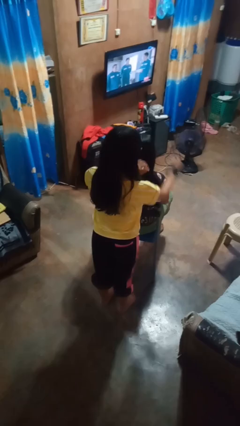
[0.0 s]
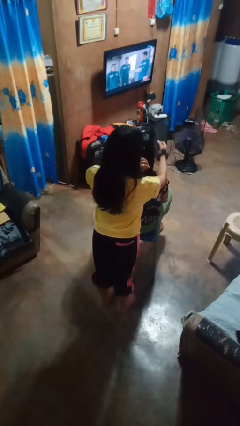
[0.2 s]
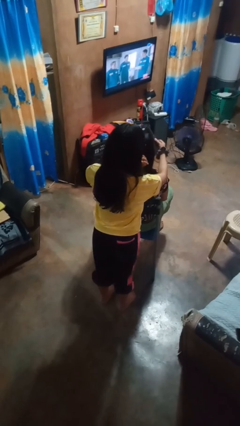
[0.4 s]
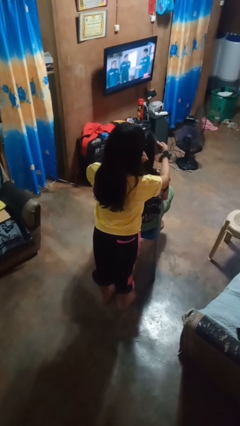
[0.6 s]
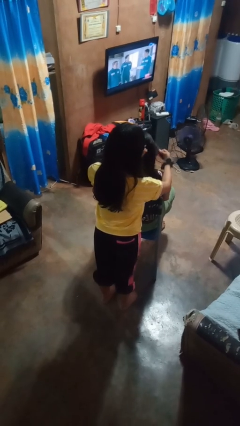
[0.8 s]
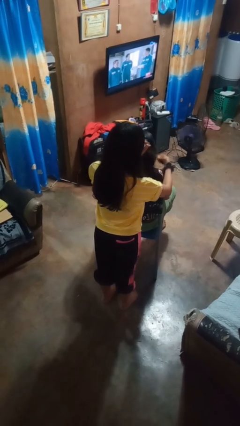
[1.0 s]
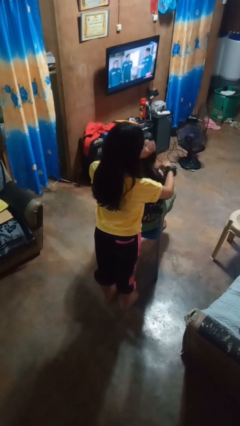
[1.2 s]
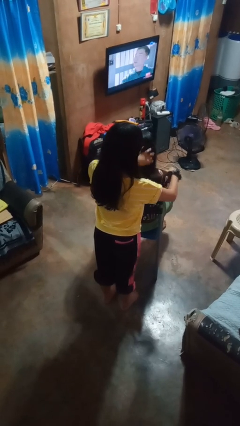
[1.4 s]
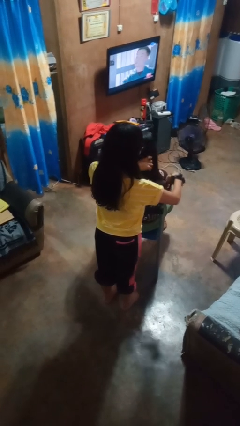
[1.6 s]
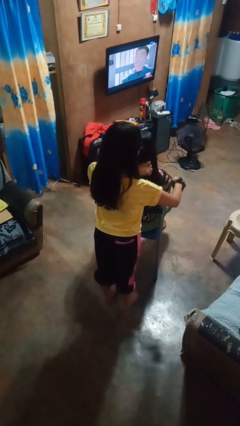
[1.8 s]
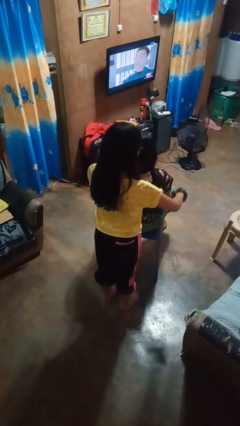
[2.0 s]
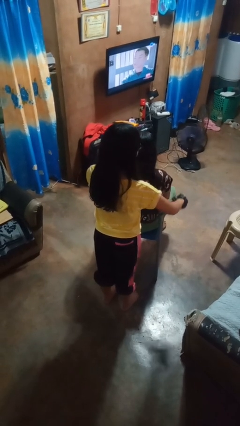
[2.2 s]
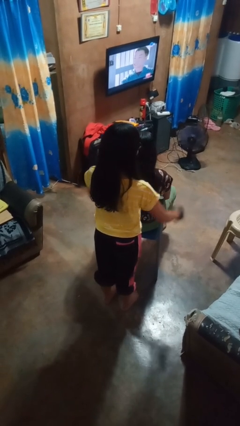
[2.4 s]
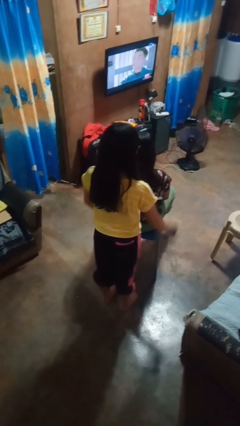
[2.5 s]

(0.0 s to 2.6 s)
person brushes hair of person

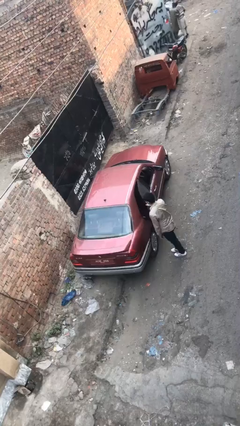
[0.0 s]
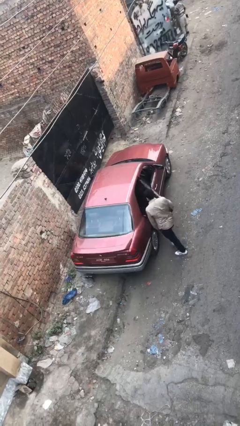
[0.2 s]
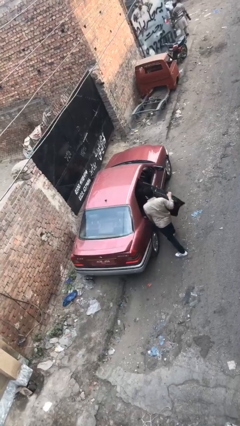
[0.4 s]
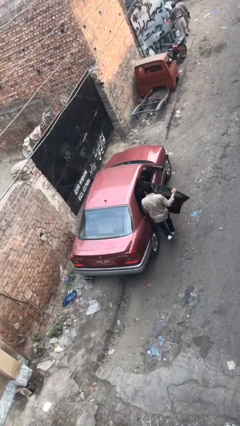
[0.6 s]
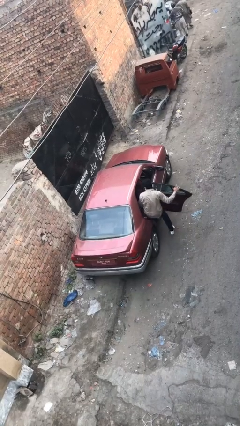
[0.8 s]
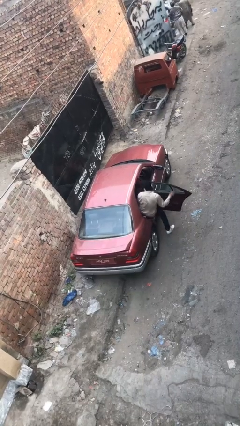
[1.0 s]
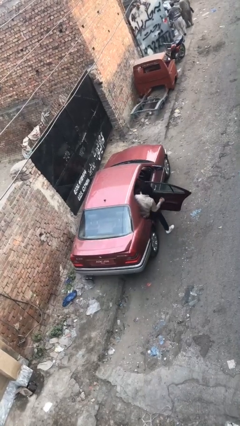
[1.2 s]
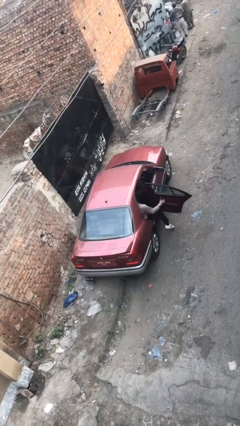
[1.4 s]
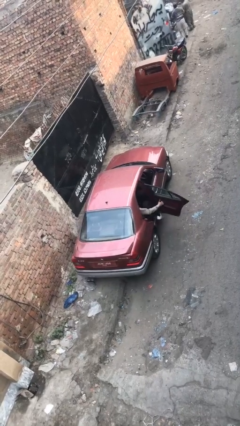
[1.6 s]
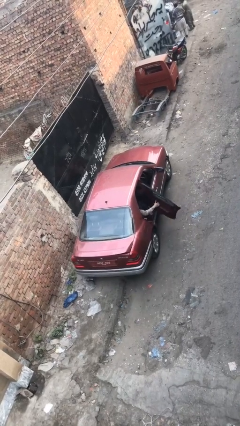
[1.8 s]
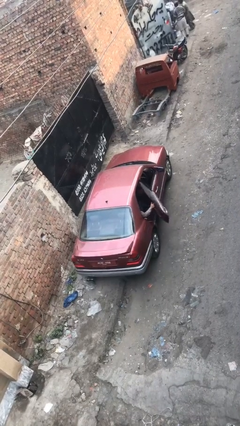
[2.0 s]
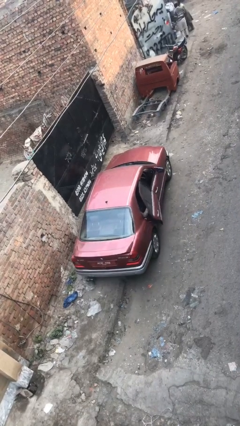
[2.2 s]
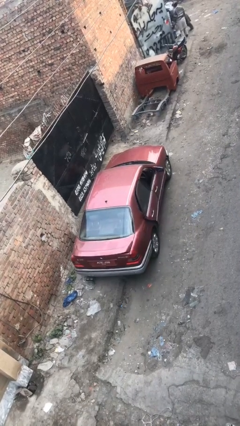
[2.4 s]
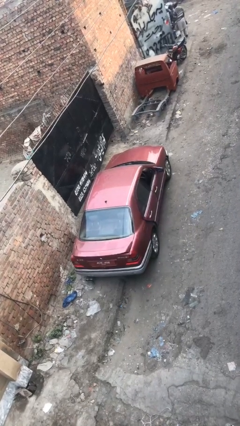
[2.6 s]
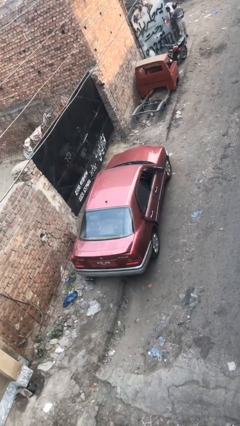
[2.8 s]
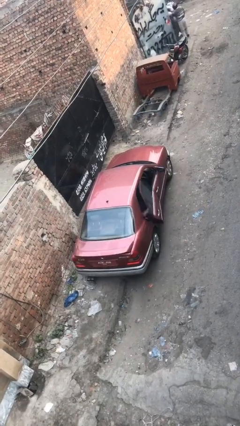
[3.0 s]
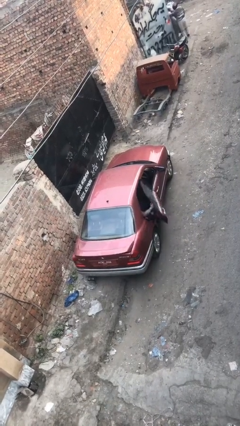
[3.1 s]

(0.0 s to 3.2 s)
car picks up person

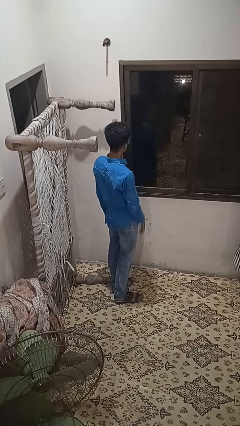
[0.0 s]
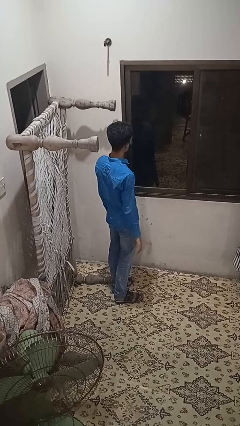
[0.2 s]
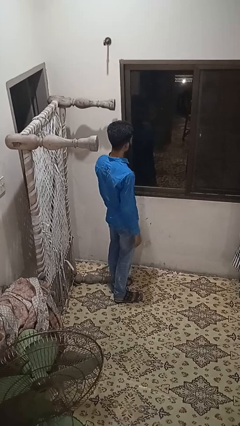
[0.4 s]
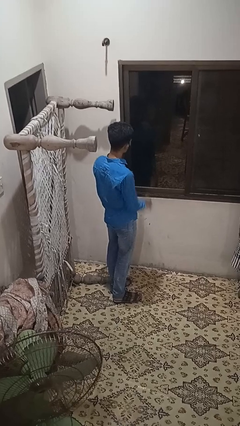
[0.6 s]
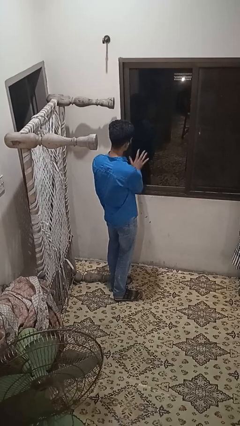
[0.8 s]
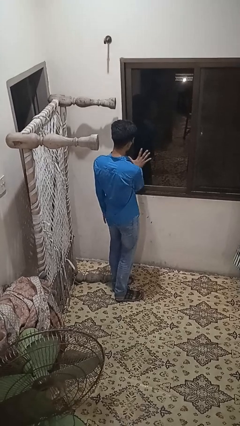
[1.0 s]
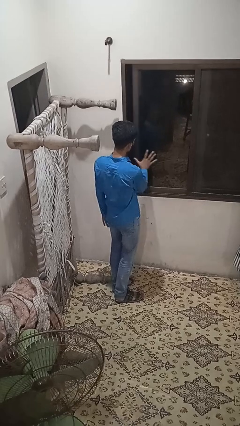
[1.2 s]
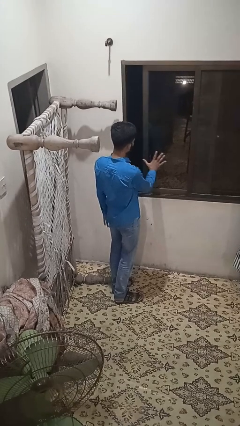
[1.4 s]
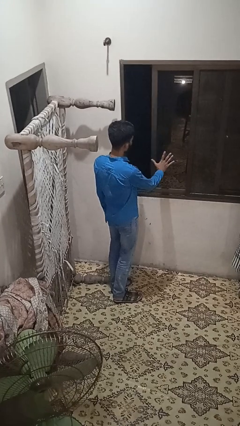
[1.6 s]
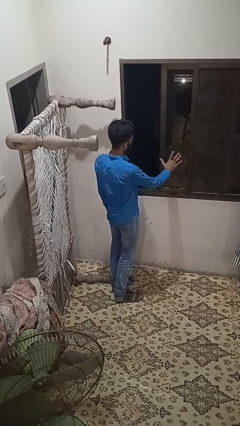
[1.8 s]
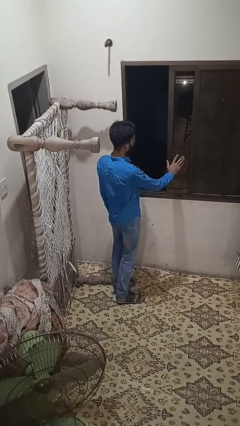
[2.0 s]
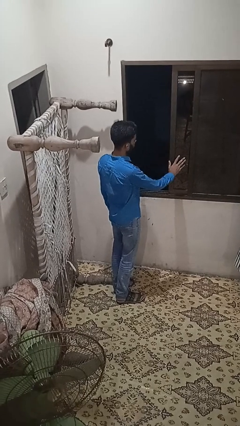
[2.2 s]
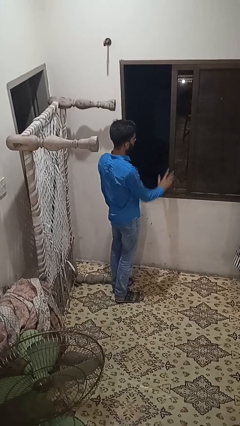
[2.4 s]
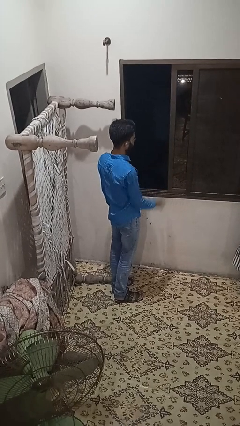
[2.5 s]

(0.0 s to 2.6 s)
person opens home window

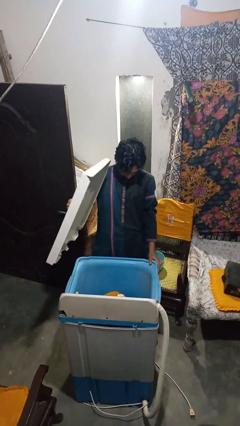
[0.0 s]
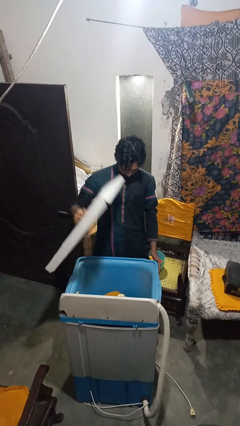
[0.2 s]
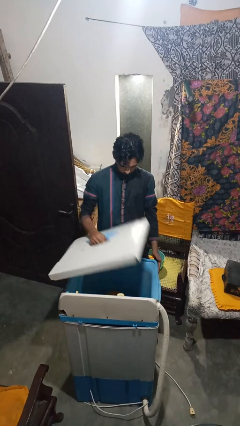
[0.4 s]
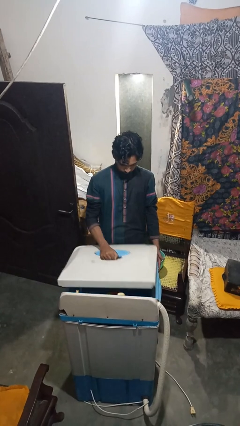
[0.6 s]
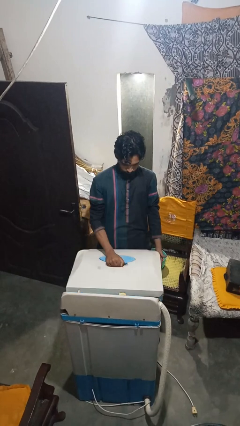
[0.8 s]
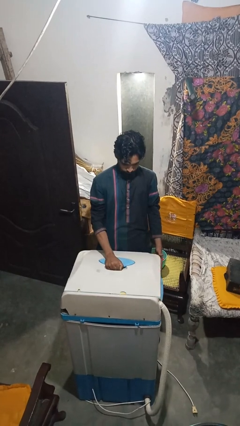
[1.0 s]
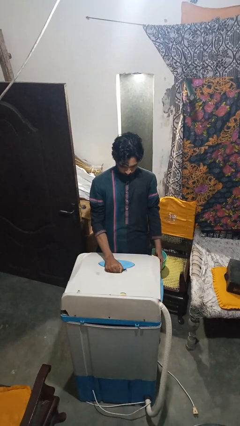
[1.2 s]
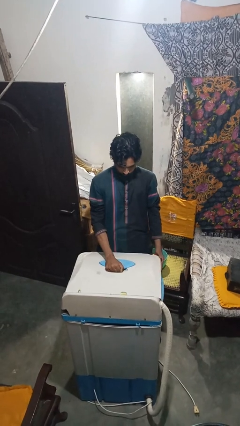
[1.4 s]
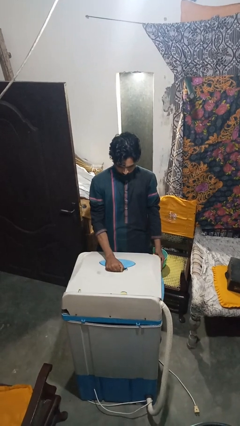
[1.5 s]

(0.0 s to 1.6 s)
person closes clothes washer

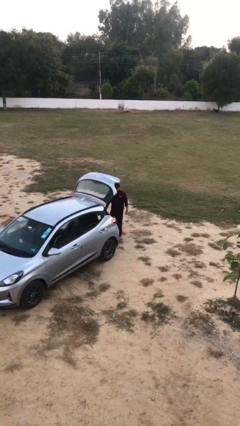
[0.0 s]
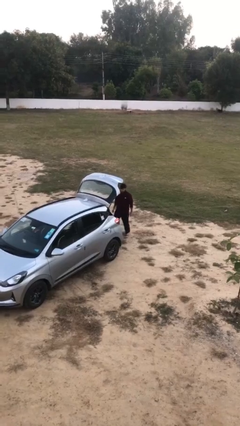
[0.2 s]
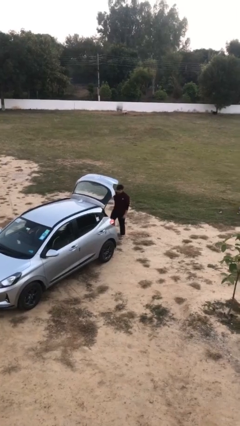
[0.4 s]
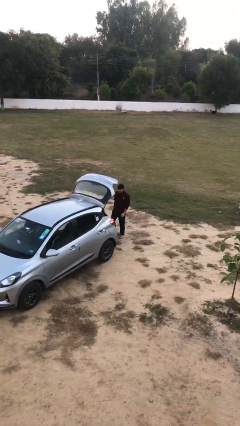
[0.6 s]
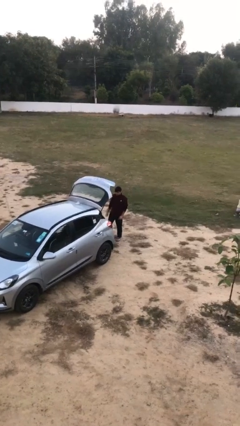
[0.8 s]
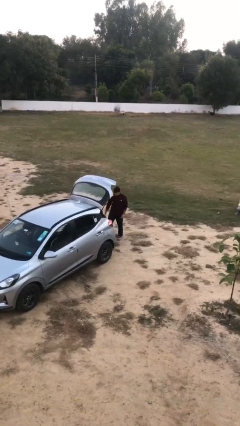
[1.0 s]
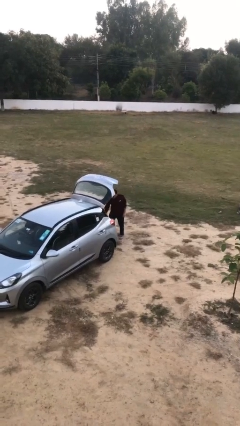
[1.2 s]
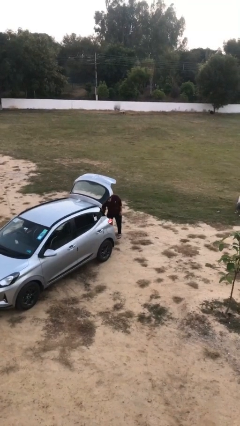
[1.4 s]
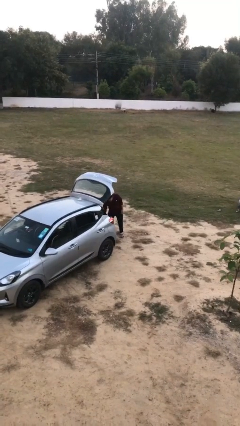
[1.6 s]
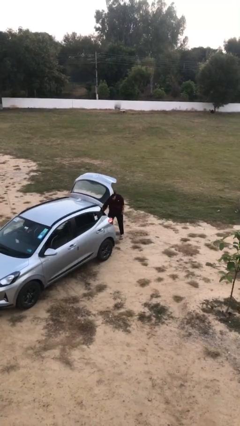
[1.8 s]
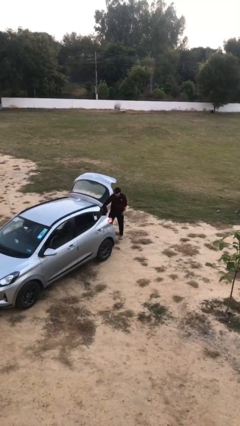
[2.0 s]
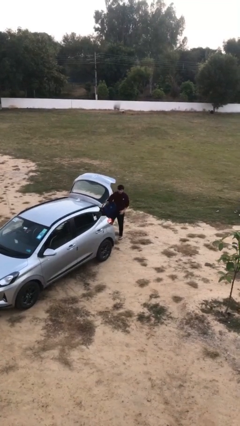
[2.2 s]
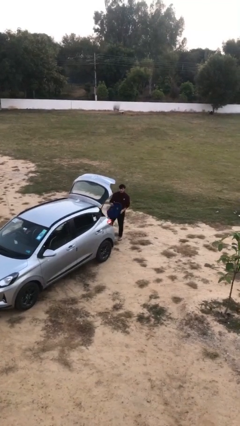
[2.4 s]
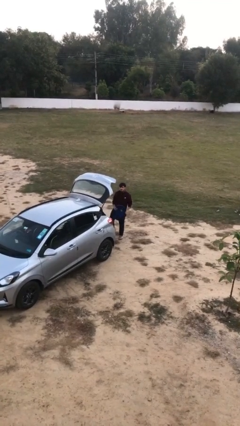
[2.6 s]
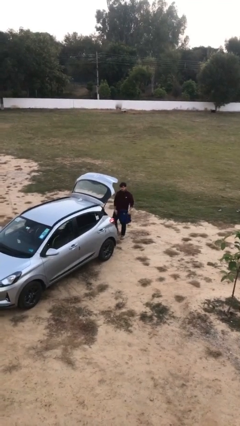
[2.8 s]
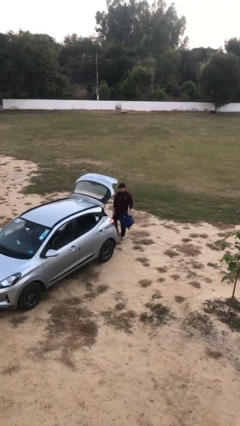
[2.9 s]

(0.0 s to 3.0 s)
person unloads car

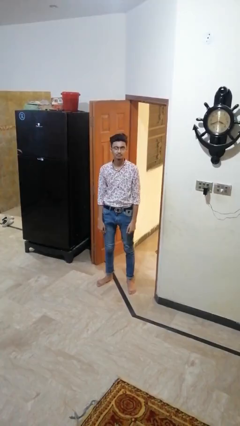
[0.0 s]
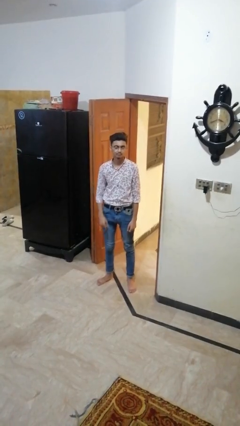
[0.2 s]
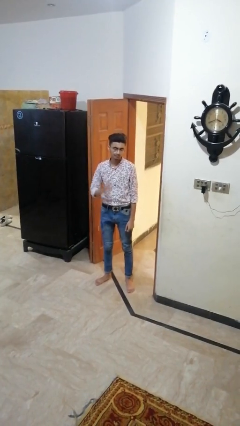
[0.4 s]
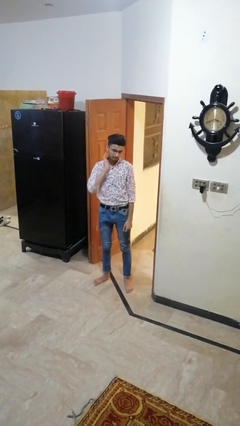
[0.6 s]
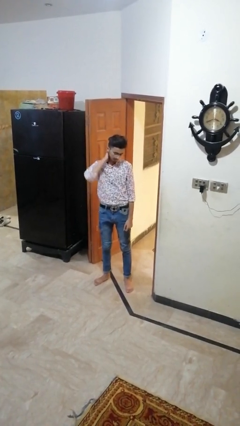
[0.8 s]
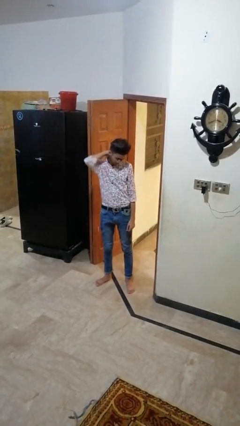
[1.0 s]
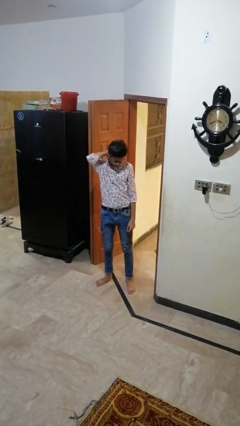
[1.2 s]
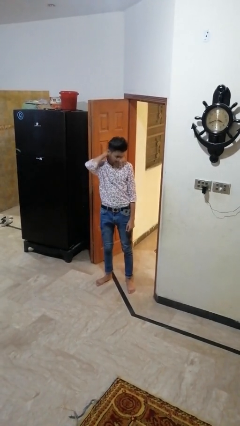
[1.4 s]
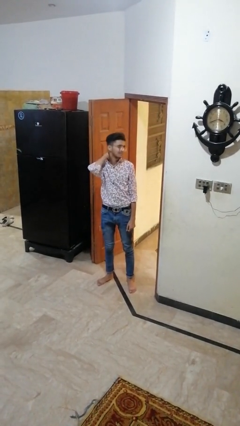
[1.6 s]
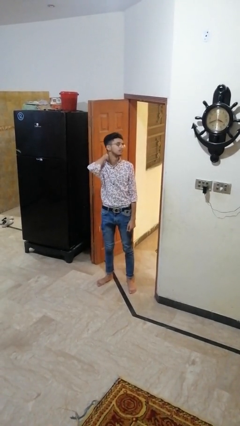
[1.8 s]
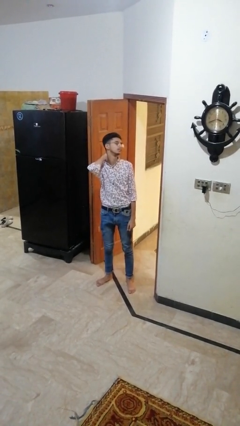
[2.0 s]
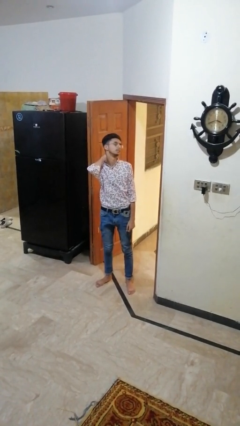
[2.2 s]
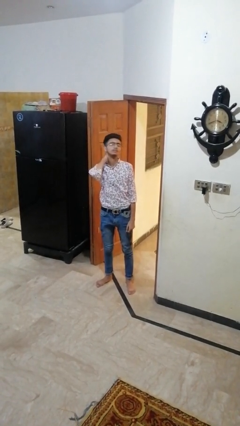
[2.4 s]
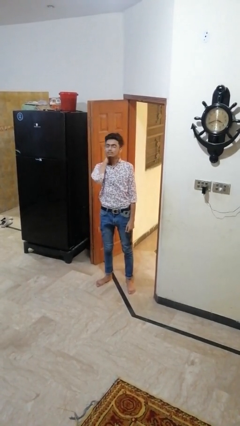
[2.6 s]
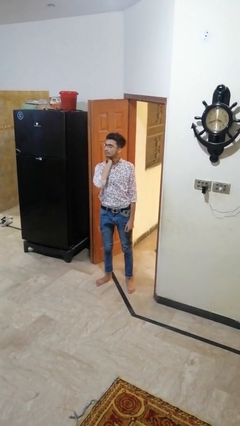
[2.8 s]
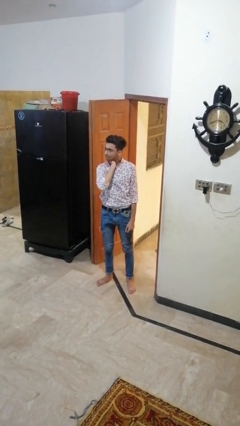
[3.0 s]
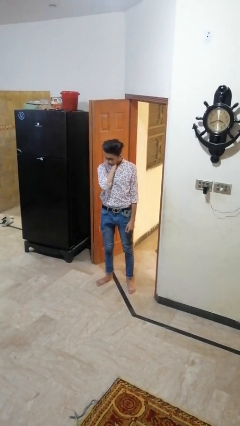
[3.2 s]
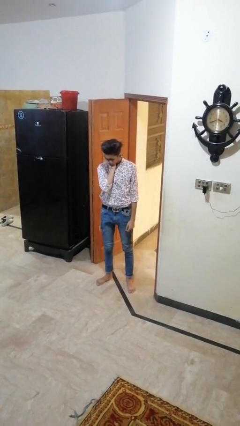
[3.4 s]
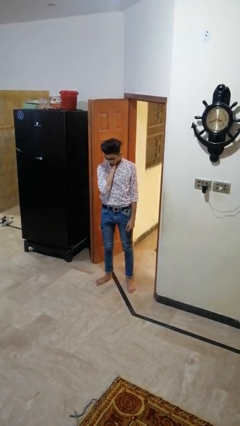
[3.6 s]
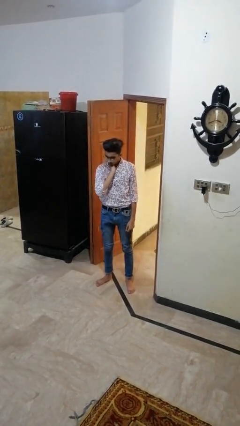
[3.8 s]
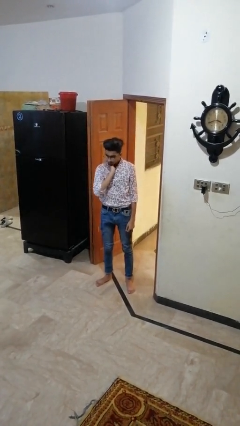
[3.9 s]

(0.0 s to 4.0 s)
person rubs neck
